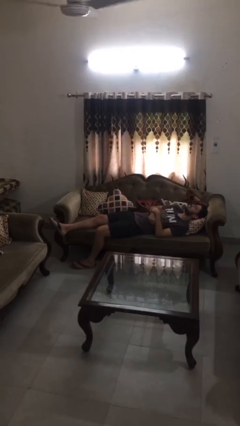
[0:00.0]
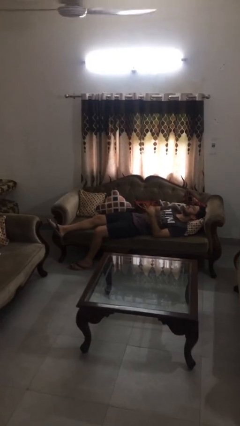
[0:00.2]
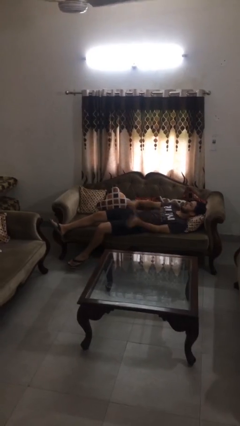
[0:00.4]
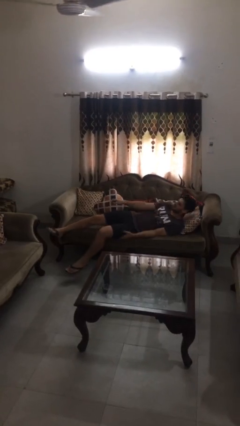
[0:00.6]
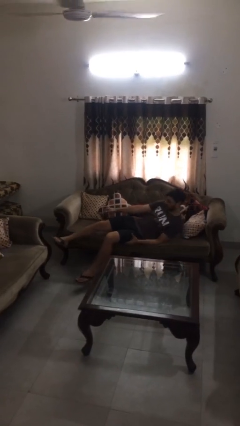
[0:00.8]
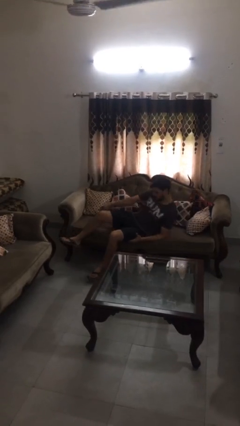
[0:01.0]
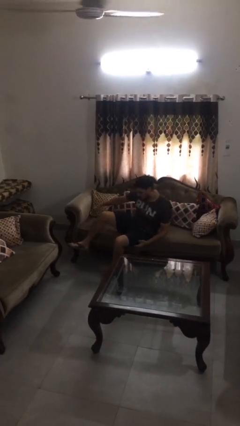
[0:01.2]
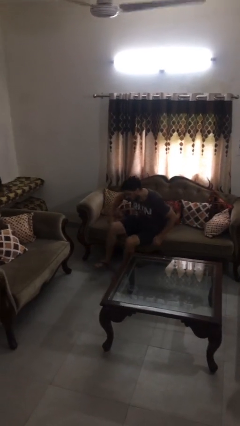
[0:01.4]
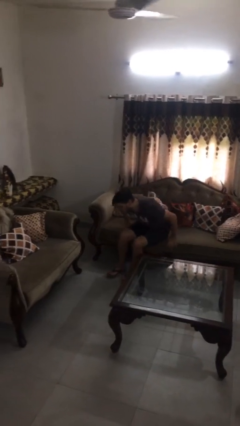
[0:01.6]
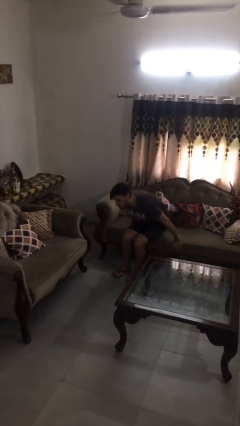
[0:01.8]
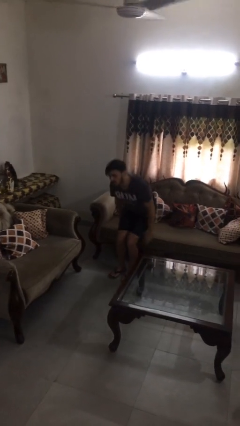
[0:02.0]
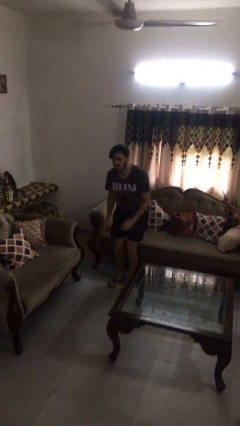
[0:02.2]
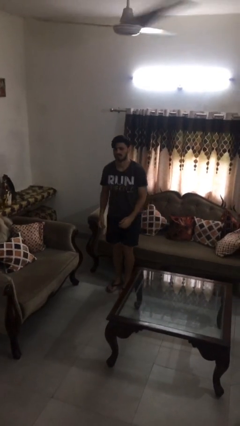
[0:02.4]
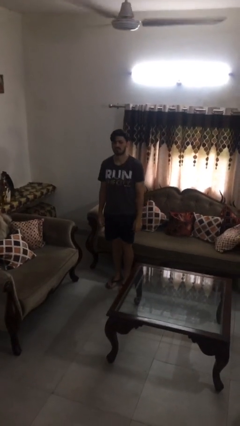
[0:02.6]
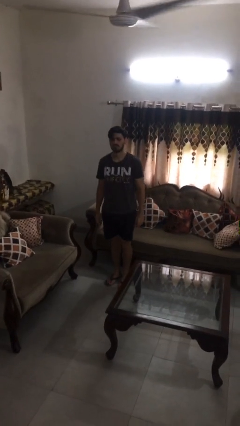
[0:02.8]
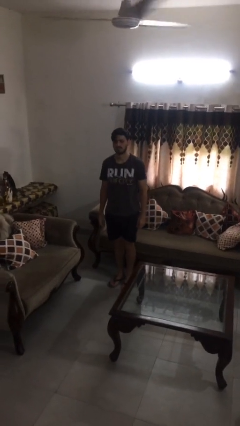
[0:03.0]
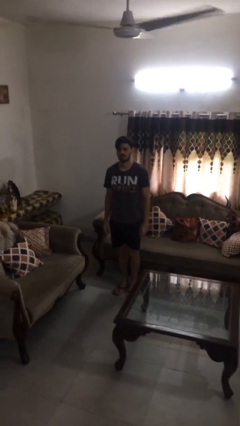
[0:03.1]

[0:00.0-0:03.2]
person stands up

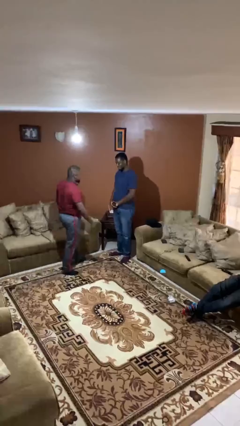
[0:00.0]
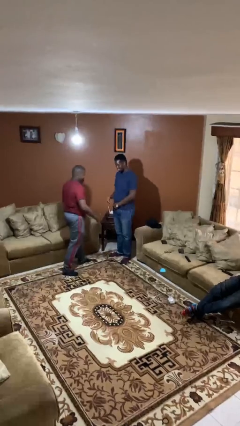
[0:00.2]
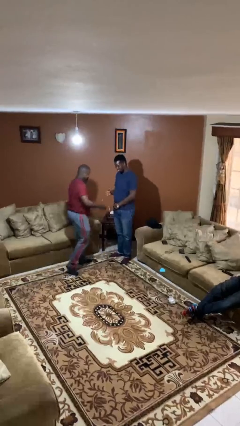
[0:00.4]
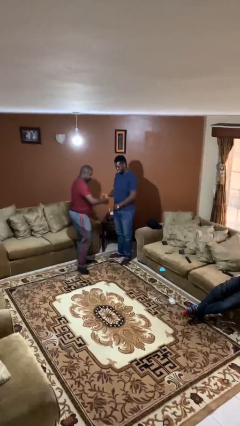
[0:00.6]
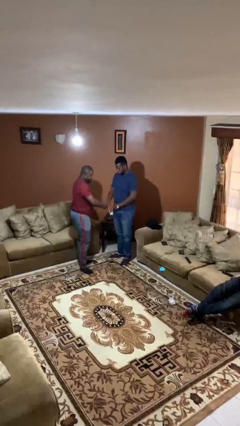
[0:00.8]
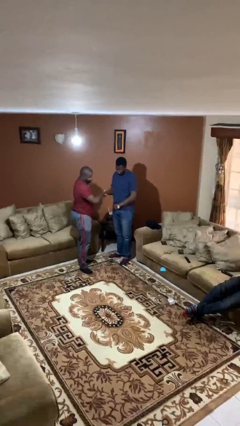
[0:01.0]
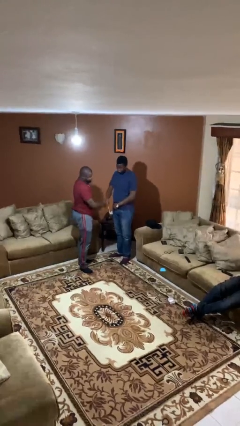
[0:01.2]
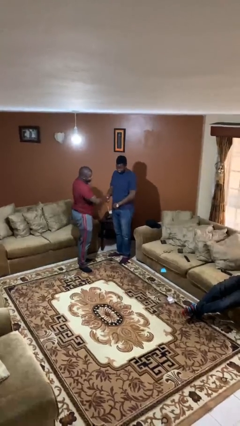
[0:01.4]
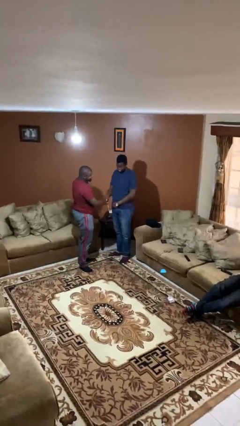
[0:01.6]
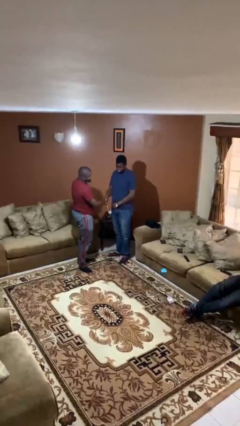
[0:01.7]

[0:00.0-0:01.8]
person shakes hand

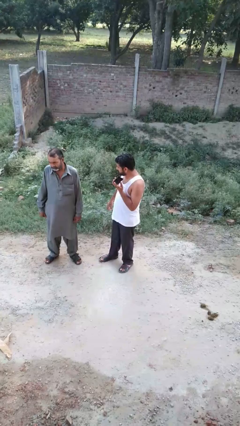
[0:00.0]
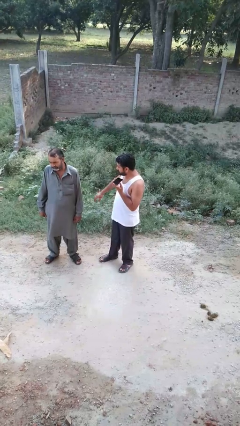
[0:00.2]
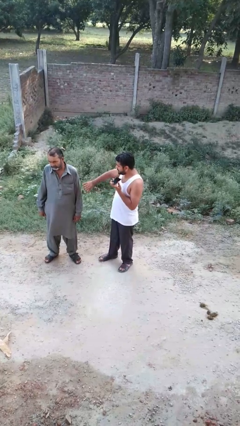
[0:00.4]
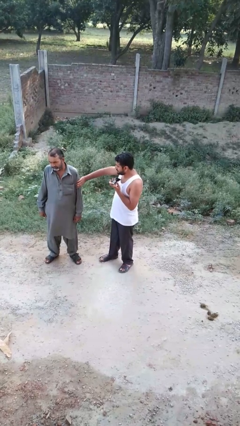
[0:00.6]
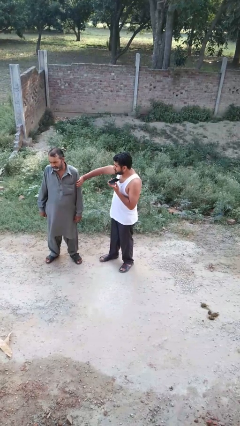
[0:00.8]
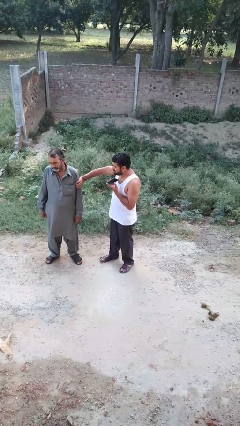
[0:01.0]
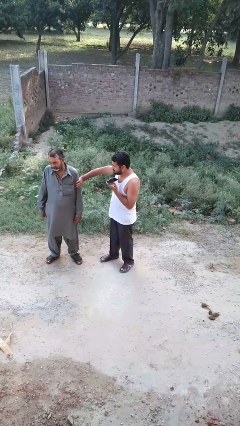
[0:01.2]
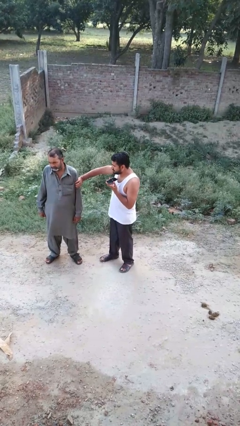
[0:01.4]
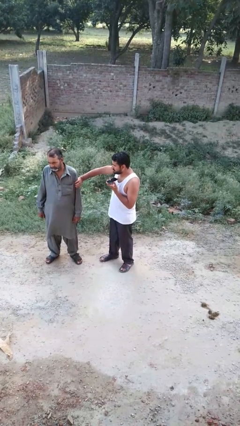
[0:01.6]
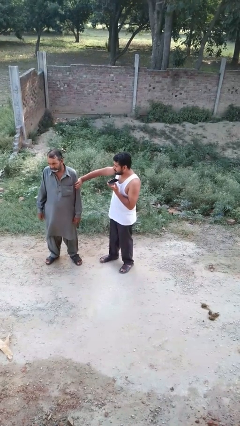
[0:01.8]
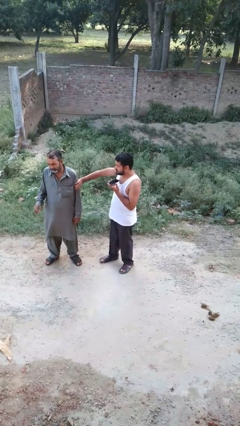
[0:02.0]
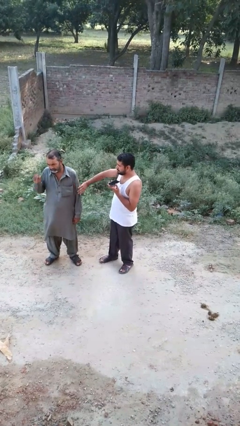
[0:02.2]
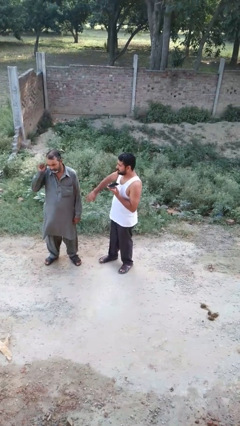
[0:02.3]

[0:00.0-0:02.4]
person grabs person by bicep

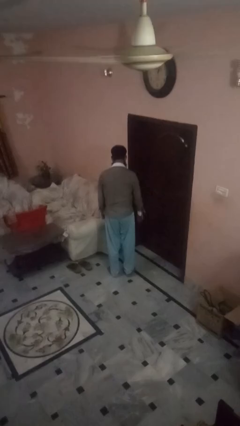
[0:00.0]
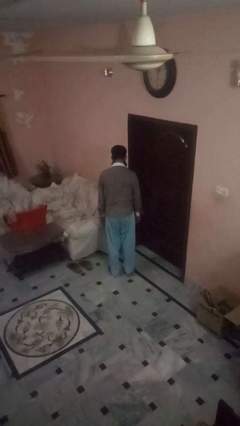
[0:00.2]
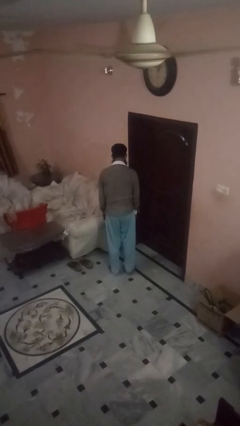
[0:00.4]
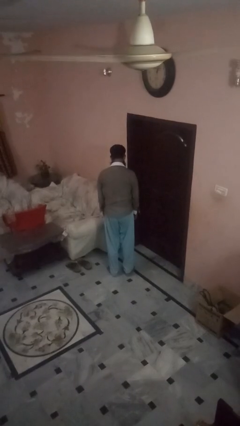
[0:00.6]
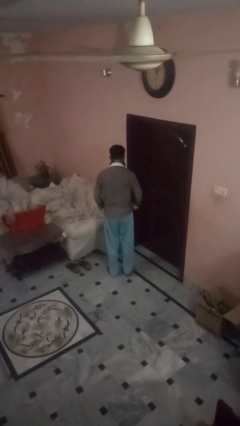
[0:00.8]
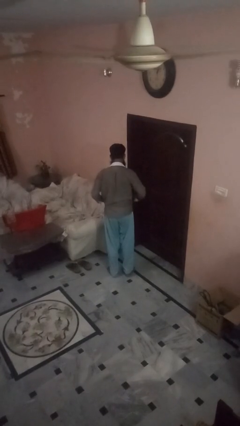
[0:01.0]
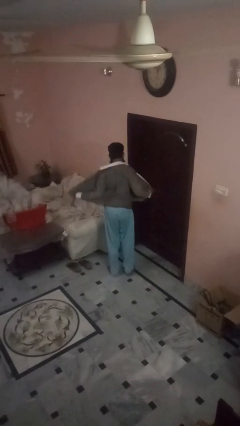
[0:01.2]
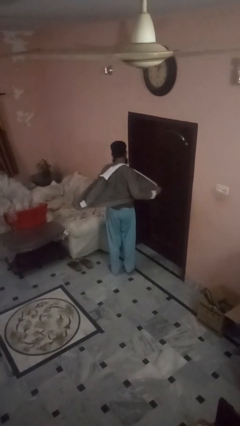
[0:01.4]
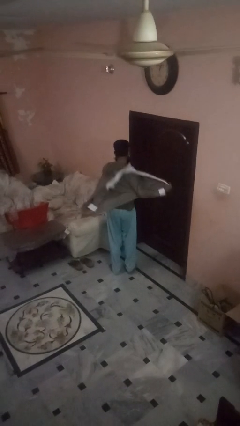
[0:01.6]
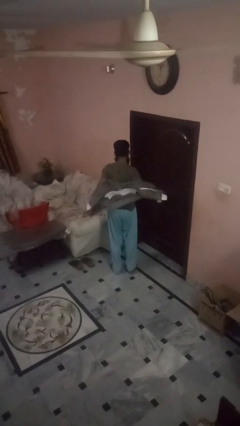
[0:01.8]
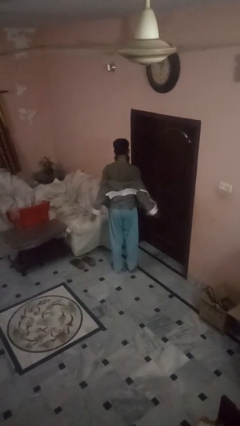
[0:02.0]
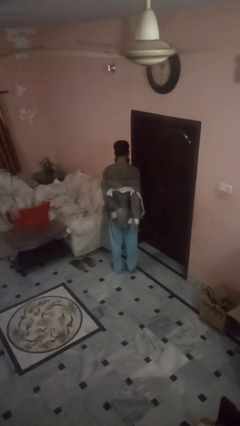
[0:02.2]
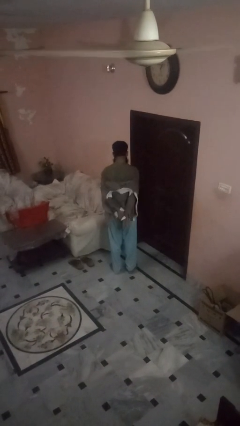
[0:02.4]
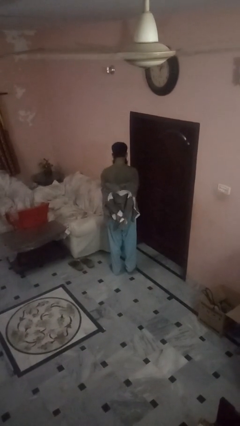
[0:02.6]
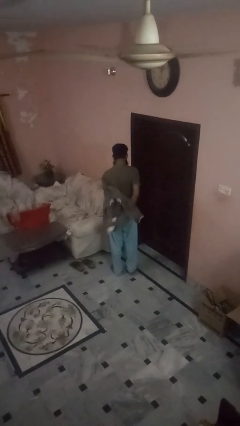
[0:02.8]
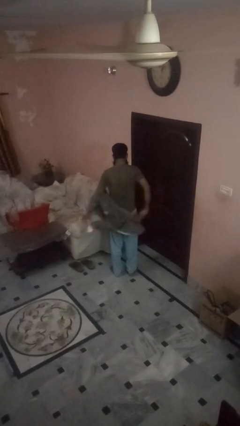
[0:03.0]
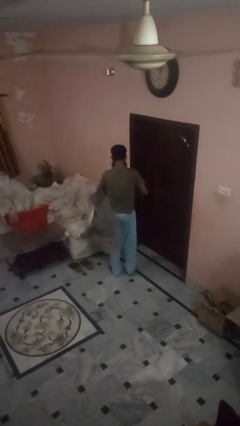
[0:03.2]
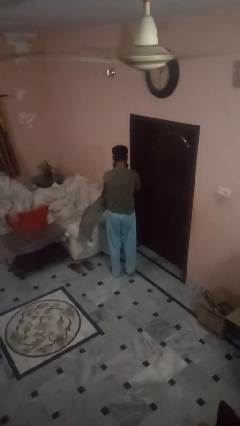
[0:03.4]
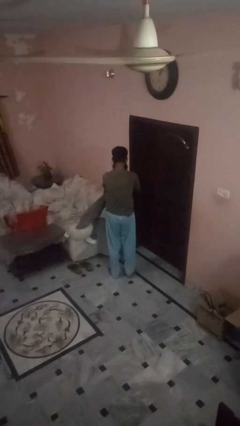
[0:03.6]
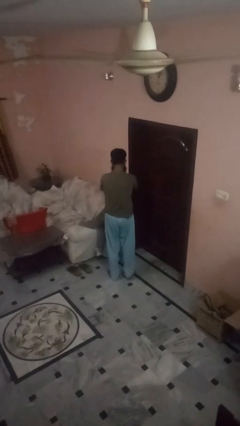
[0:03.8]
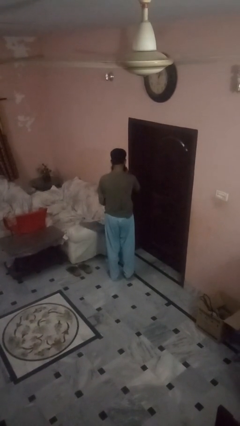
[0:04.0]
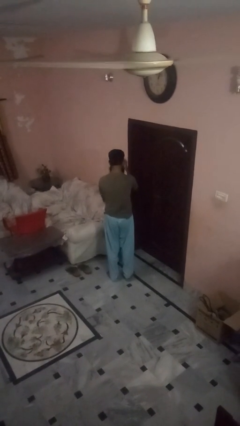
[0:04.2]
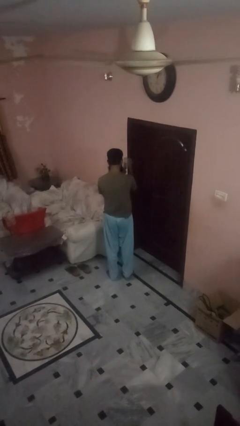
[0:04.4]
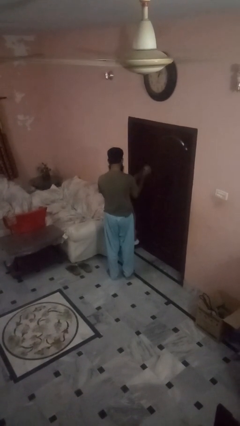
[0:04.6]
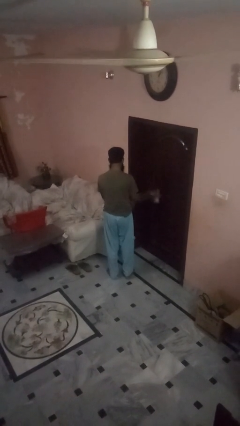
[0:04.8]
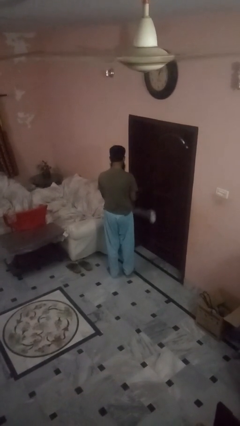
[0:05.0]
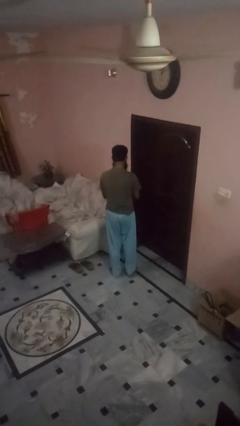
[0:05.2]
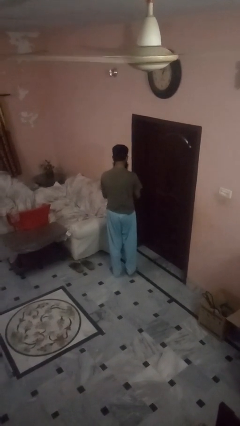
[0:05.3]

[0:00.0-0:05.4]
person takes off shirt

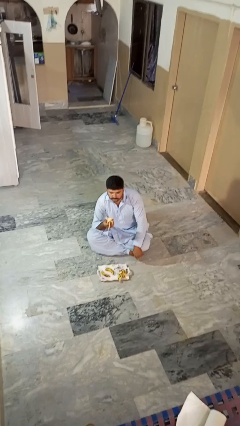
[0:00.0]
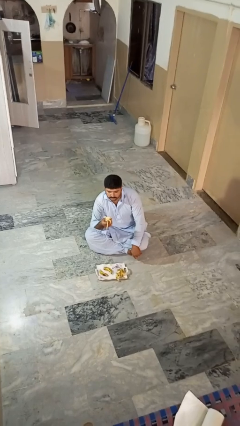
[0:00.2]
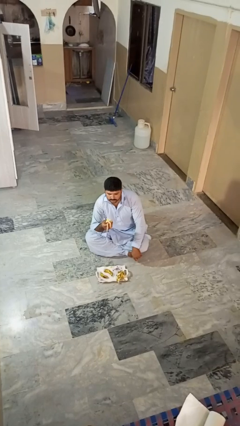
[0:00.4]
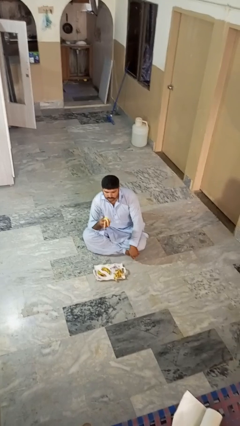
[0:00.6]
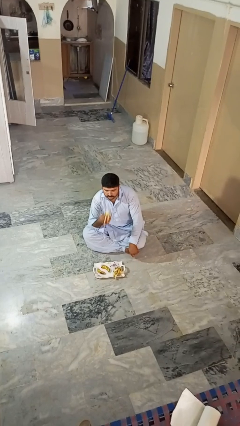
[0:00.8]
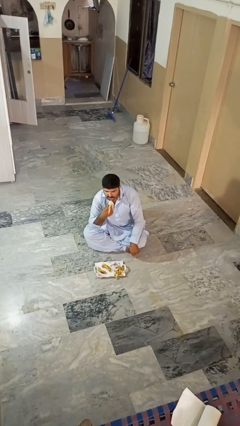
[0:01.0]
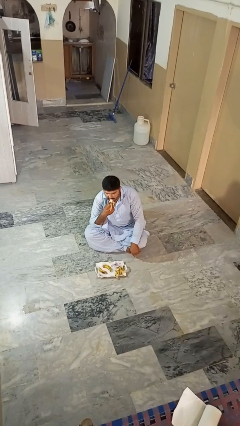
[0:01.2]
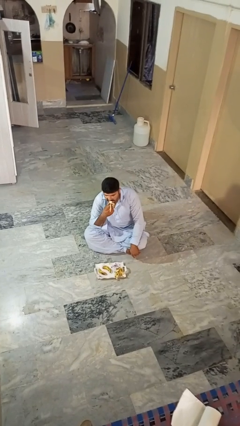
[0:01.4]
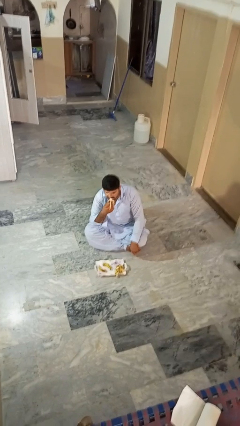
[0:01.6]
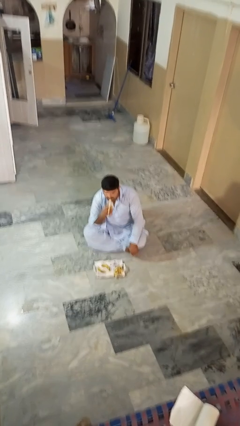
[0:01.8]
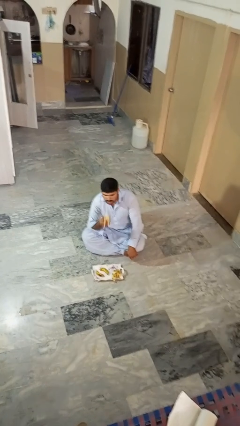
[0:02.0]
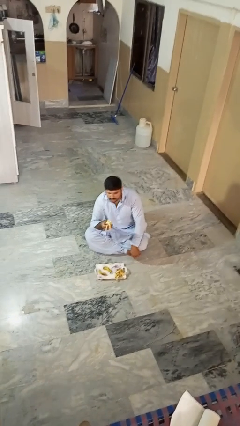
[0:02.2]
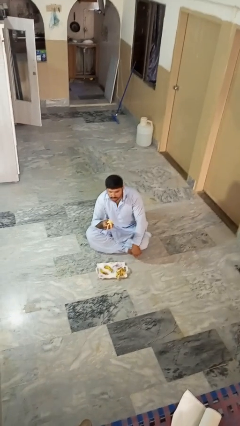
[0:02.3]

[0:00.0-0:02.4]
person eats banana

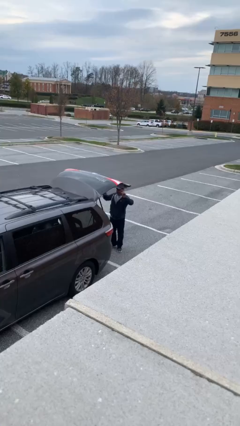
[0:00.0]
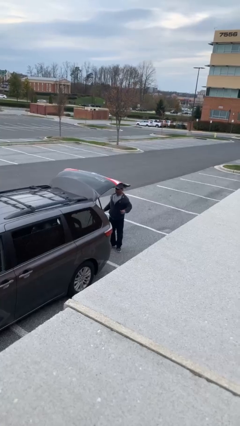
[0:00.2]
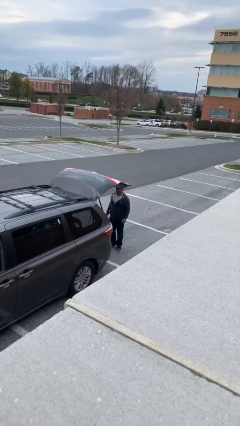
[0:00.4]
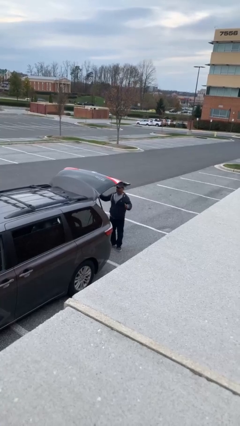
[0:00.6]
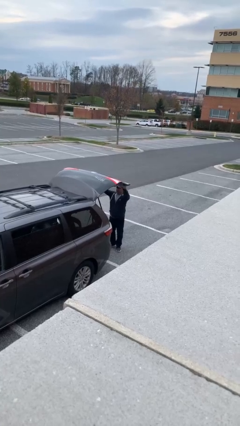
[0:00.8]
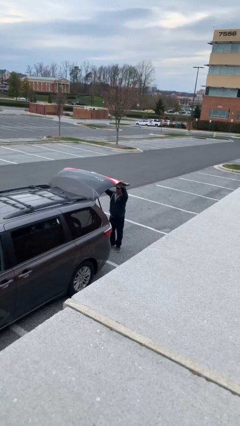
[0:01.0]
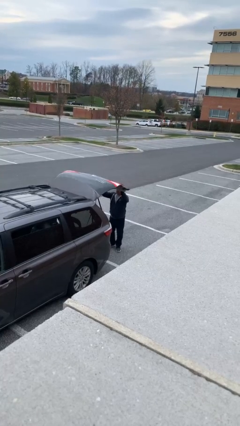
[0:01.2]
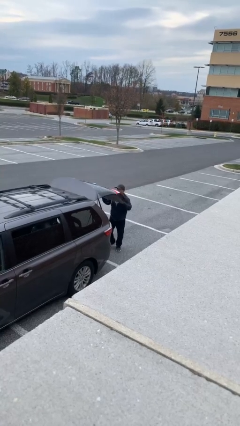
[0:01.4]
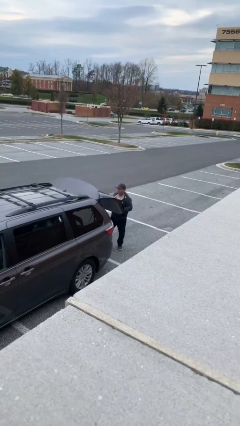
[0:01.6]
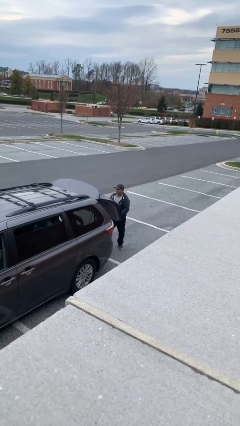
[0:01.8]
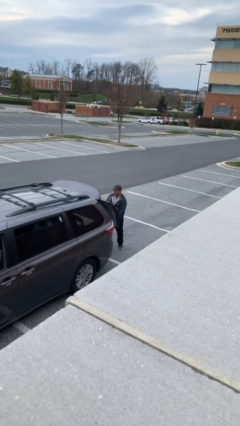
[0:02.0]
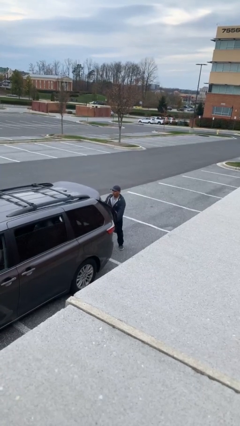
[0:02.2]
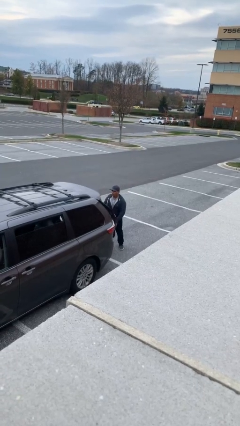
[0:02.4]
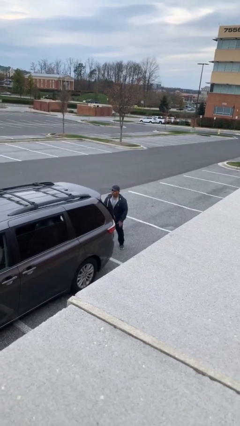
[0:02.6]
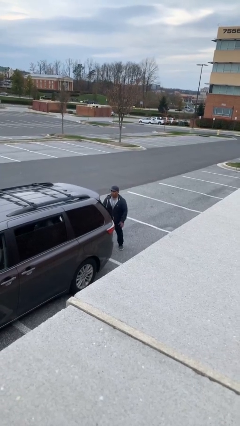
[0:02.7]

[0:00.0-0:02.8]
person closes car trunk
